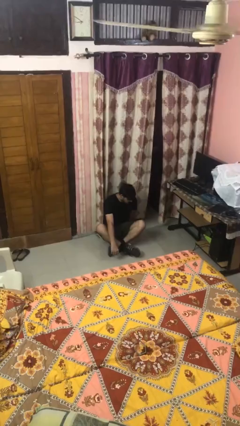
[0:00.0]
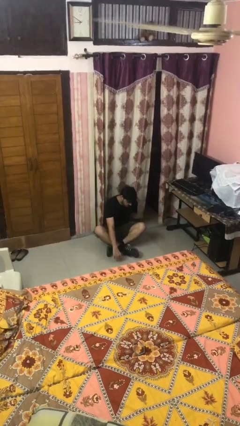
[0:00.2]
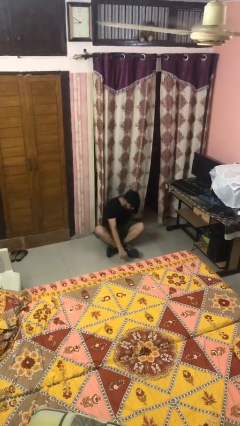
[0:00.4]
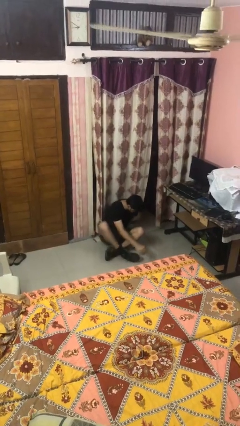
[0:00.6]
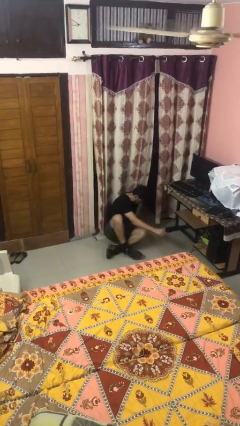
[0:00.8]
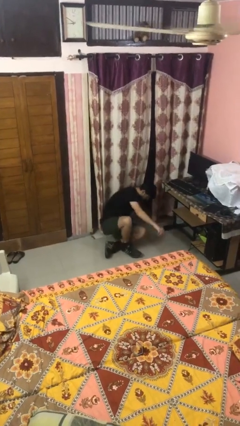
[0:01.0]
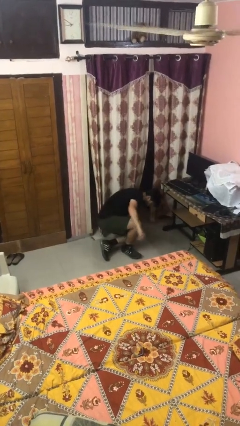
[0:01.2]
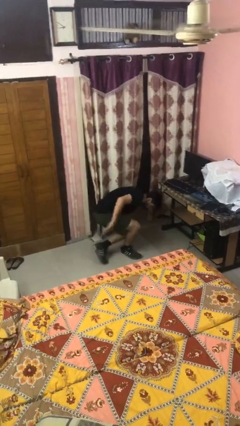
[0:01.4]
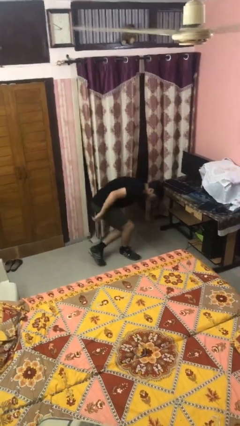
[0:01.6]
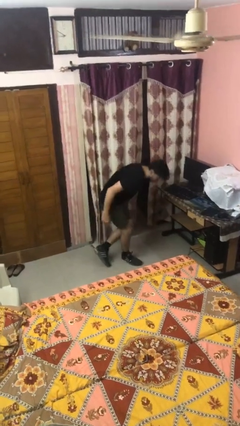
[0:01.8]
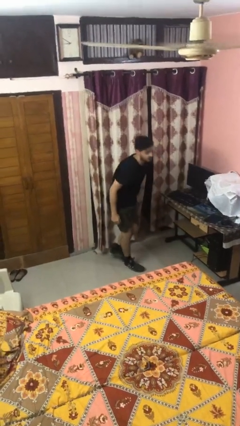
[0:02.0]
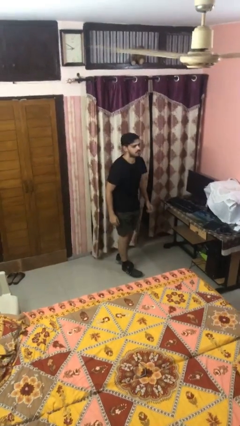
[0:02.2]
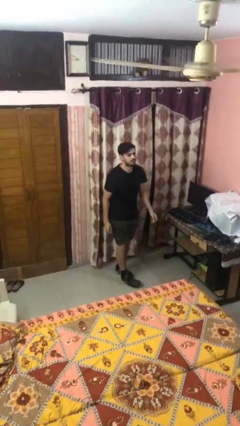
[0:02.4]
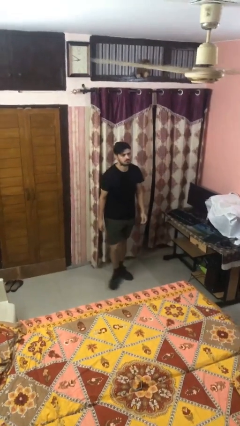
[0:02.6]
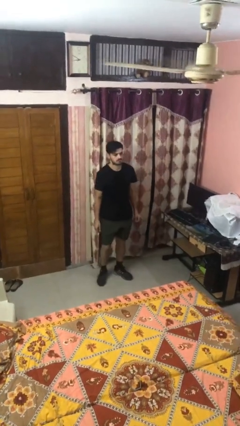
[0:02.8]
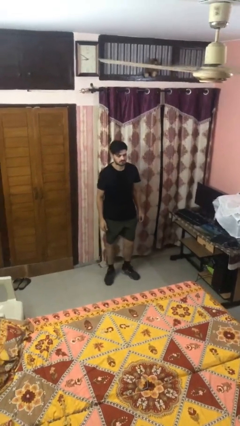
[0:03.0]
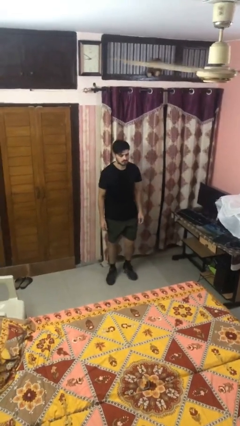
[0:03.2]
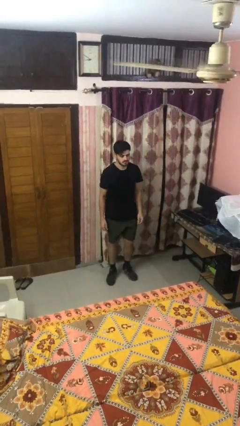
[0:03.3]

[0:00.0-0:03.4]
person stands up from floor

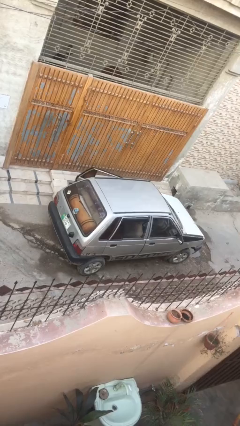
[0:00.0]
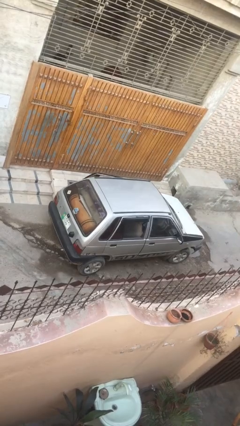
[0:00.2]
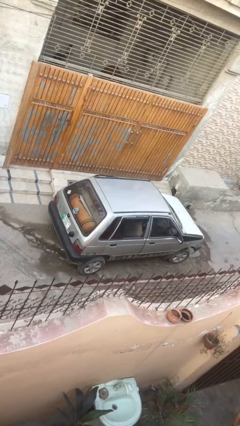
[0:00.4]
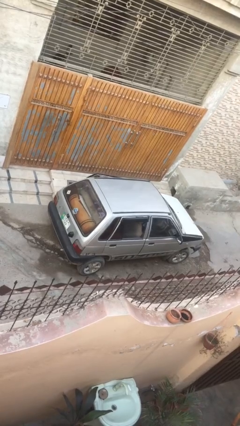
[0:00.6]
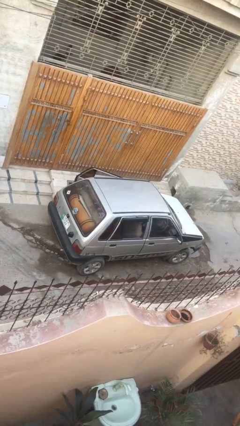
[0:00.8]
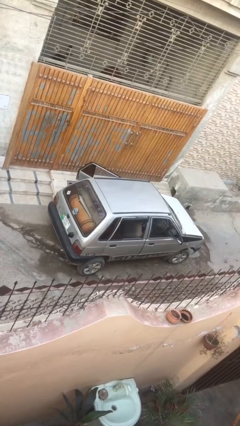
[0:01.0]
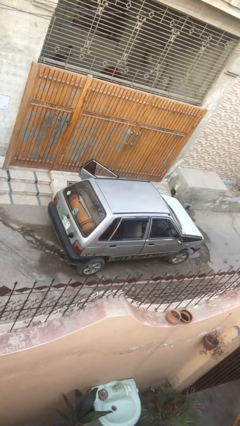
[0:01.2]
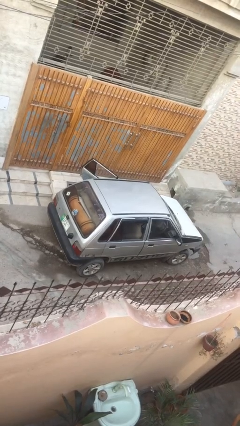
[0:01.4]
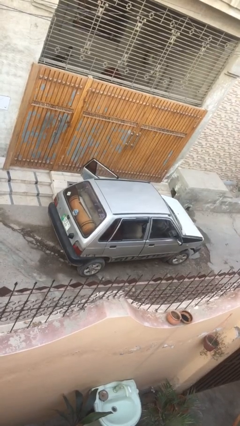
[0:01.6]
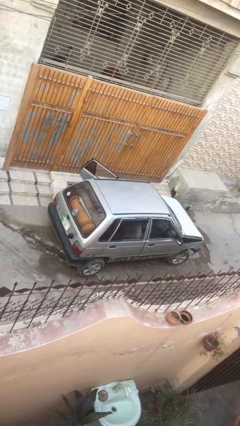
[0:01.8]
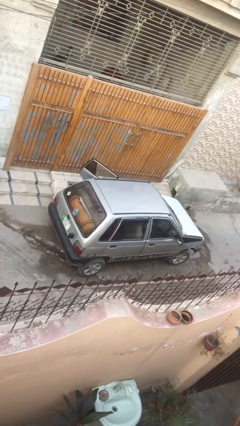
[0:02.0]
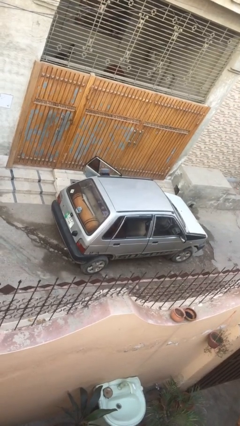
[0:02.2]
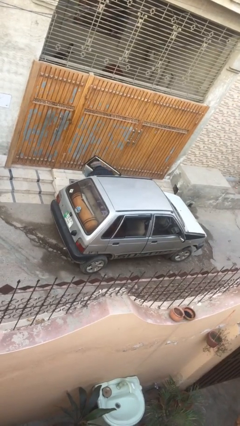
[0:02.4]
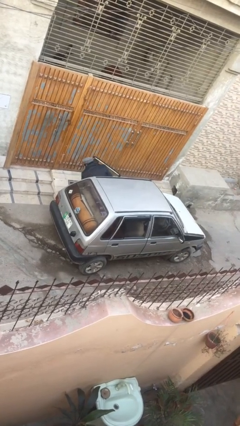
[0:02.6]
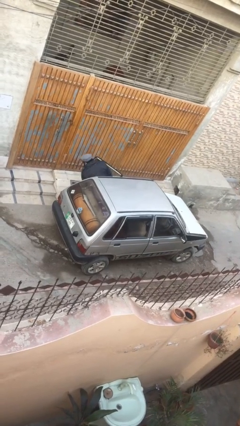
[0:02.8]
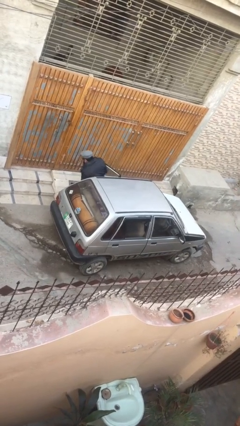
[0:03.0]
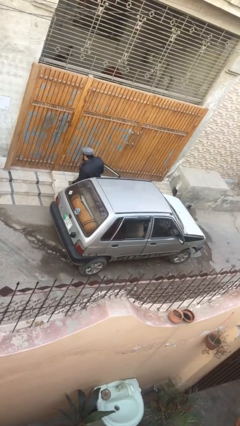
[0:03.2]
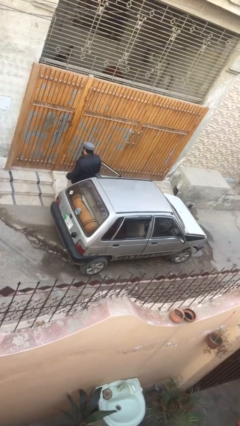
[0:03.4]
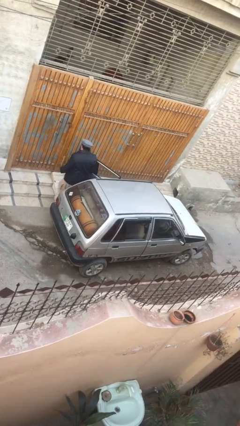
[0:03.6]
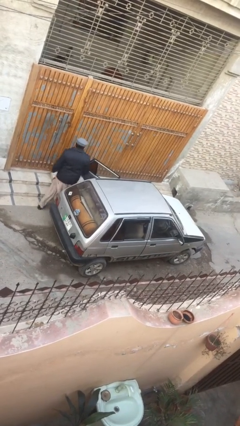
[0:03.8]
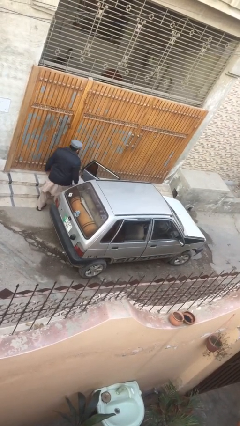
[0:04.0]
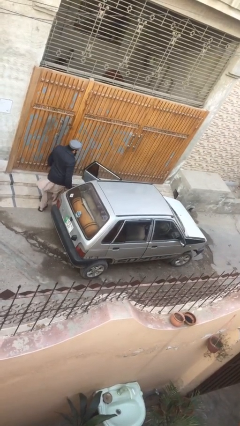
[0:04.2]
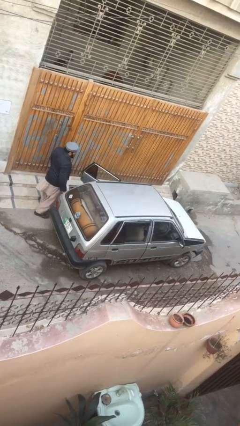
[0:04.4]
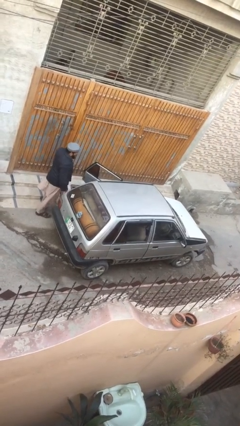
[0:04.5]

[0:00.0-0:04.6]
car drops off person

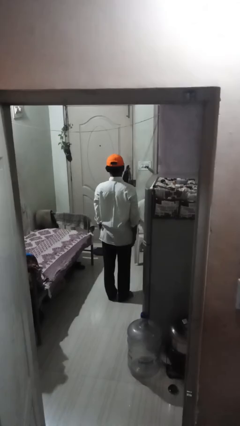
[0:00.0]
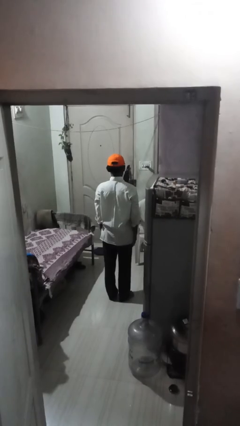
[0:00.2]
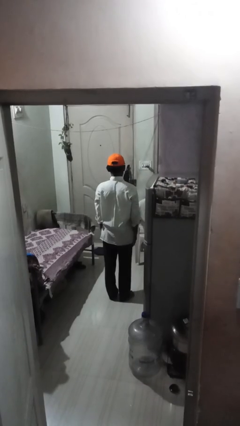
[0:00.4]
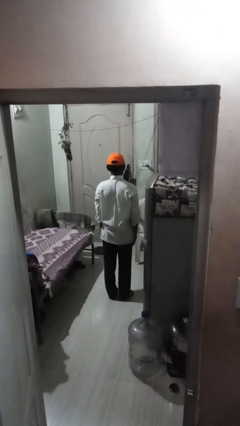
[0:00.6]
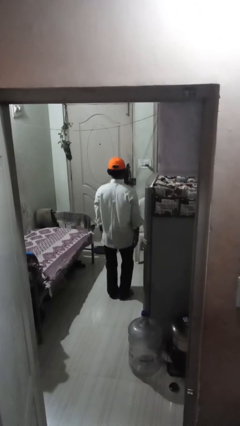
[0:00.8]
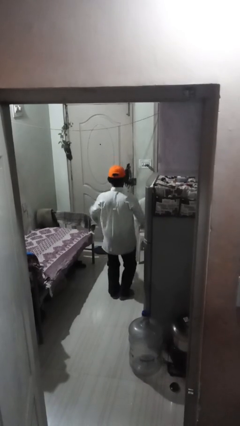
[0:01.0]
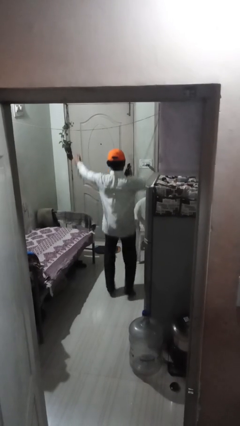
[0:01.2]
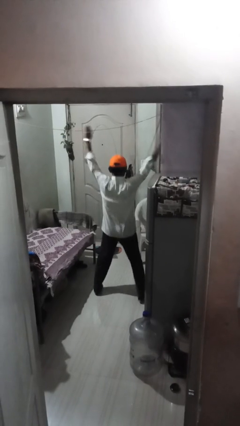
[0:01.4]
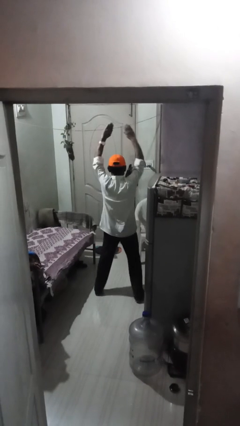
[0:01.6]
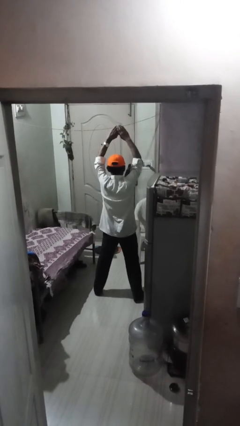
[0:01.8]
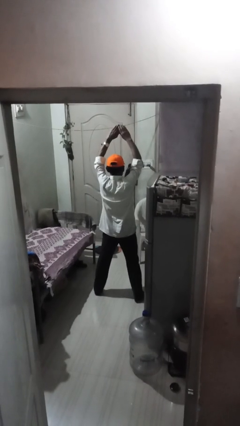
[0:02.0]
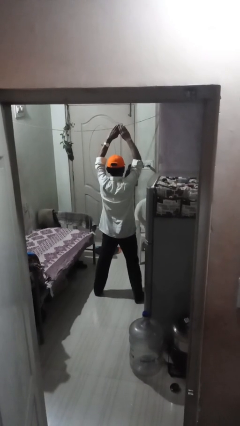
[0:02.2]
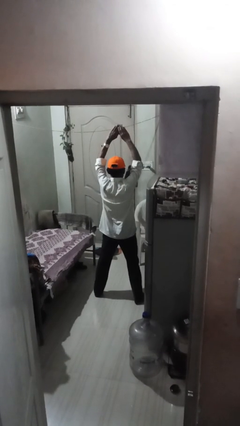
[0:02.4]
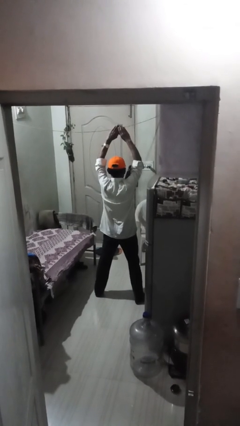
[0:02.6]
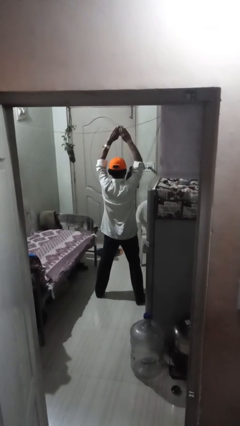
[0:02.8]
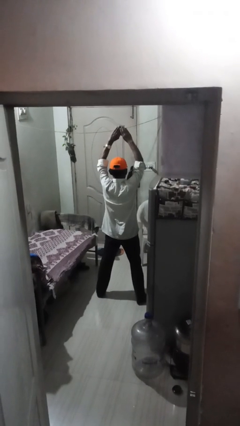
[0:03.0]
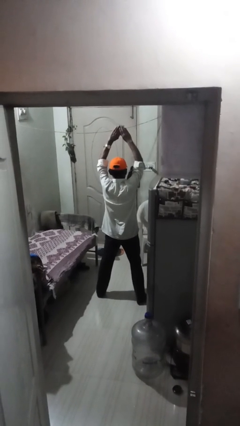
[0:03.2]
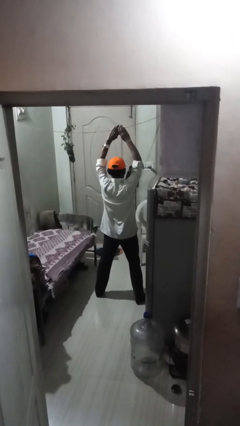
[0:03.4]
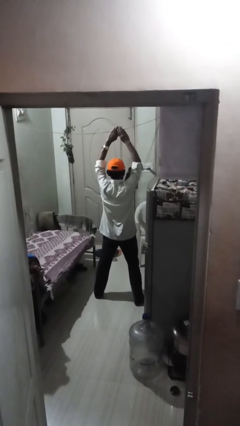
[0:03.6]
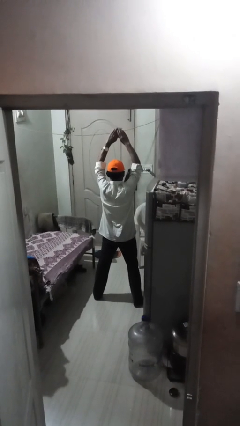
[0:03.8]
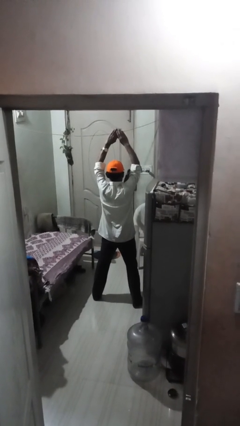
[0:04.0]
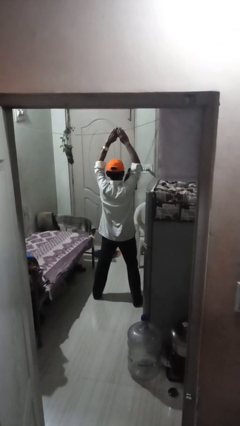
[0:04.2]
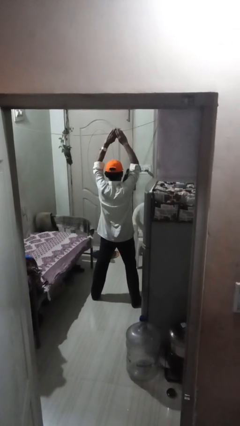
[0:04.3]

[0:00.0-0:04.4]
person exercises with jumping jacks

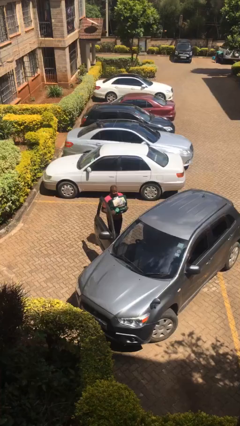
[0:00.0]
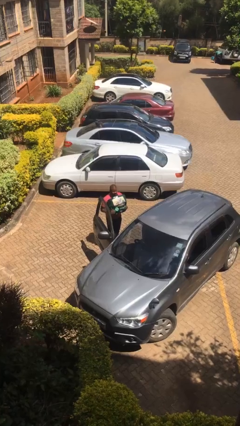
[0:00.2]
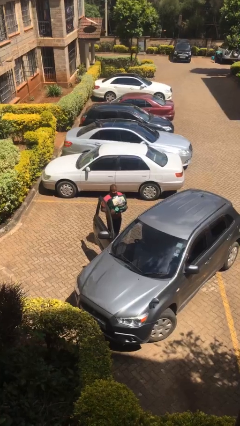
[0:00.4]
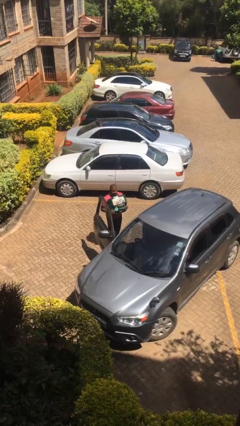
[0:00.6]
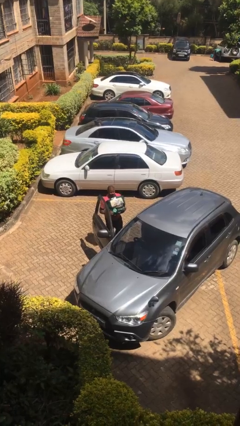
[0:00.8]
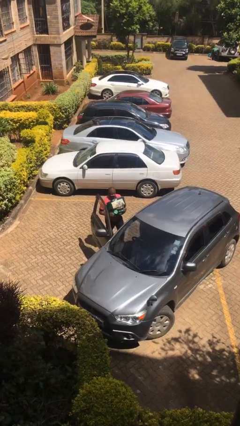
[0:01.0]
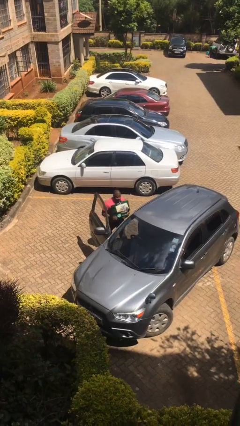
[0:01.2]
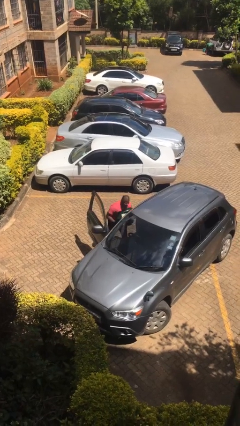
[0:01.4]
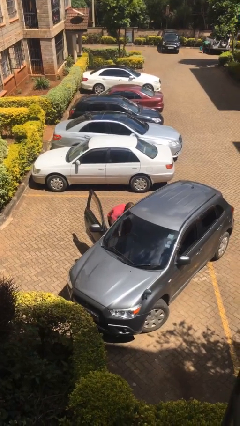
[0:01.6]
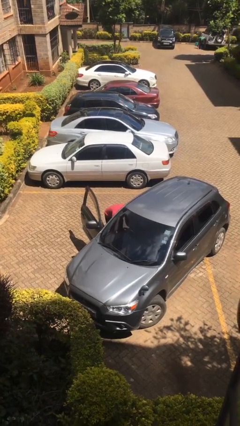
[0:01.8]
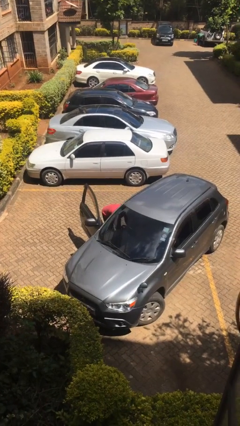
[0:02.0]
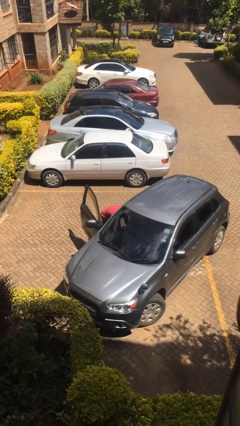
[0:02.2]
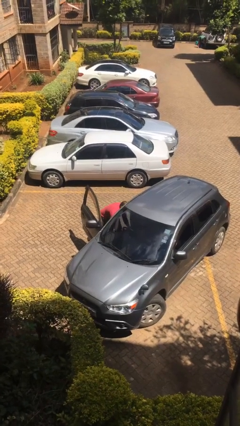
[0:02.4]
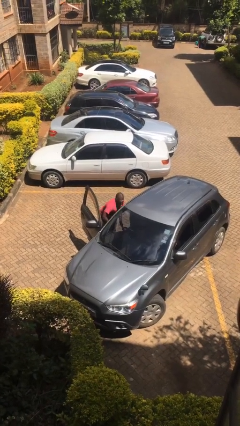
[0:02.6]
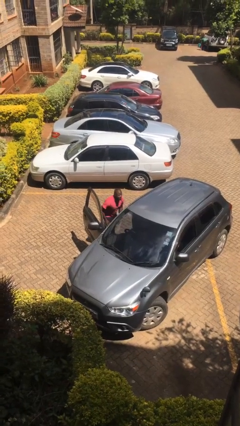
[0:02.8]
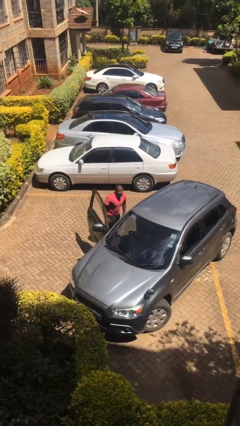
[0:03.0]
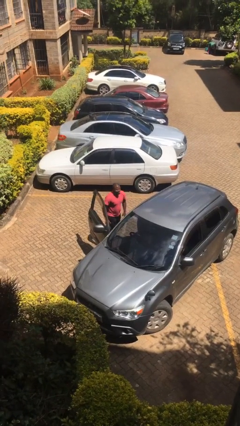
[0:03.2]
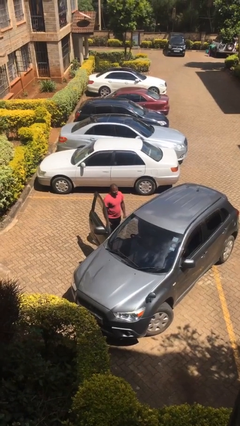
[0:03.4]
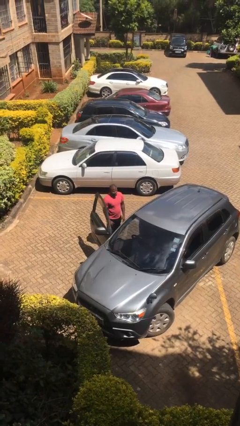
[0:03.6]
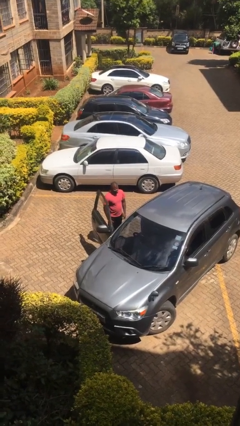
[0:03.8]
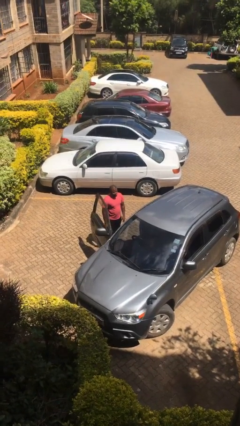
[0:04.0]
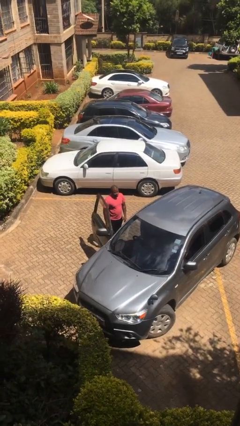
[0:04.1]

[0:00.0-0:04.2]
person loads car

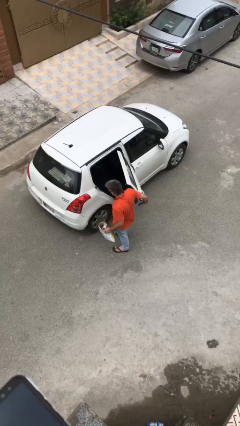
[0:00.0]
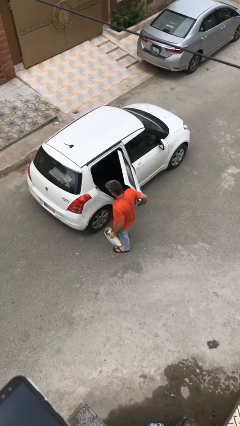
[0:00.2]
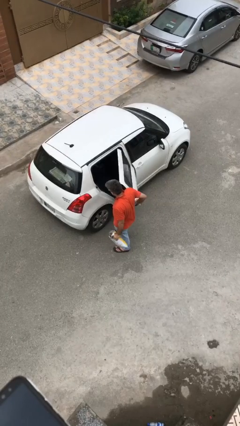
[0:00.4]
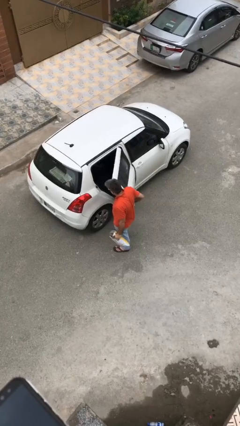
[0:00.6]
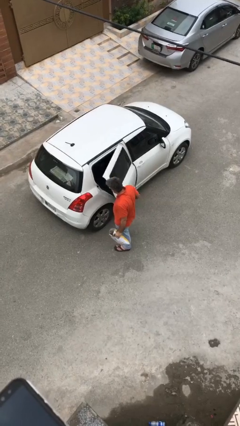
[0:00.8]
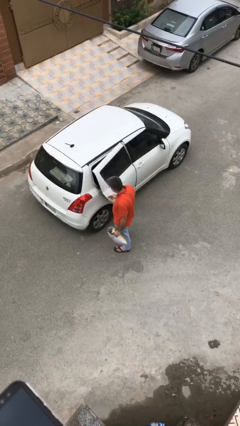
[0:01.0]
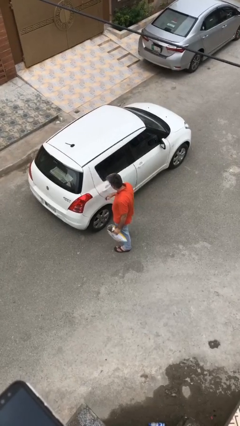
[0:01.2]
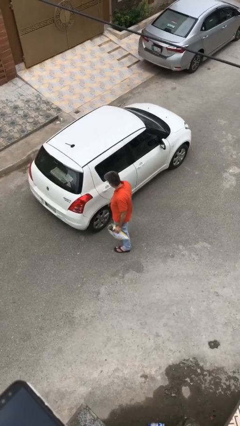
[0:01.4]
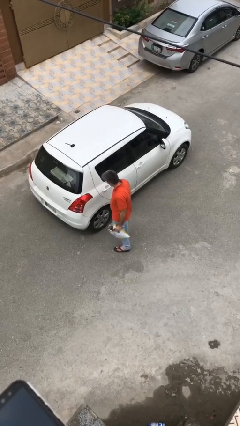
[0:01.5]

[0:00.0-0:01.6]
person closes car door
